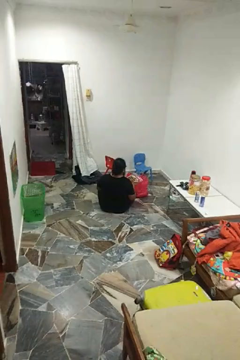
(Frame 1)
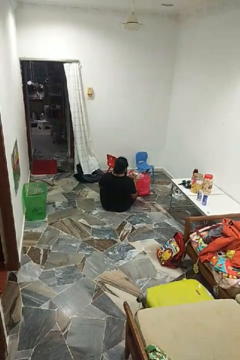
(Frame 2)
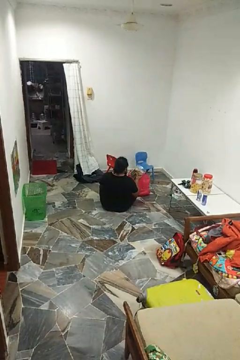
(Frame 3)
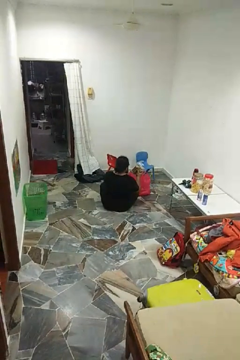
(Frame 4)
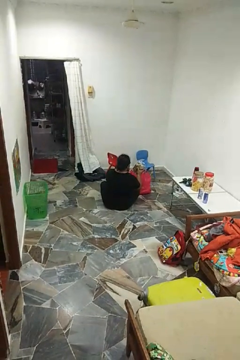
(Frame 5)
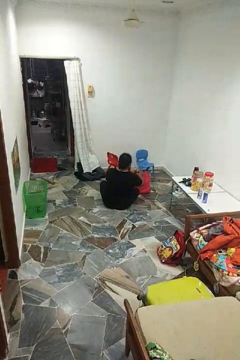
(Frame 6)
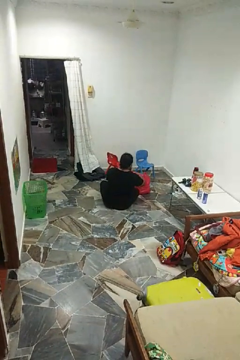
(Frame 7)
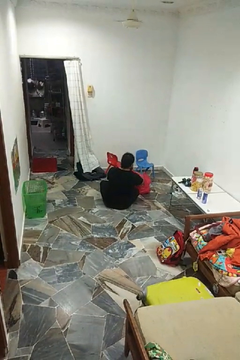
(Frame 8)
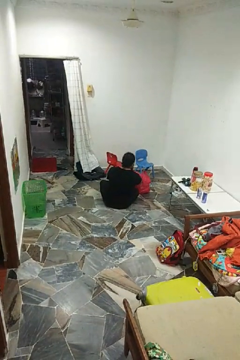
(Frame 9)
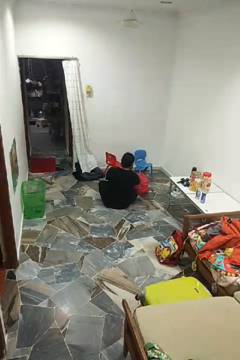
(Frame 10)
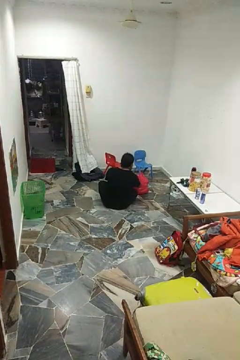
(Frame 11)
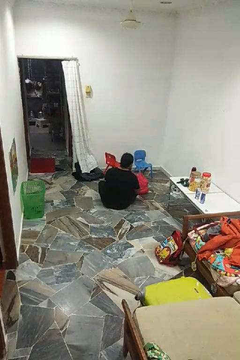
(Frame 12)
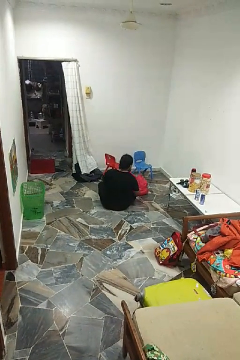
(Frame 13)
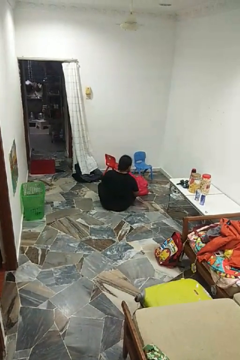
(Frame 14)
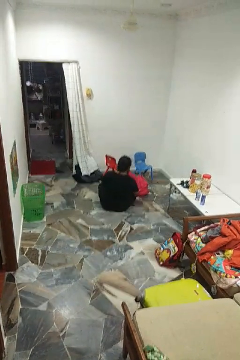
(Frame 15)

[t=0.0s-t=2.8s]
person puts object into bag

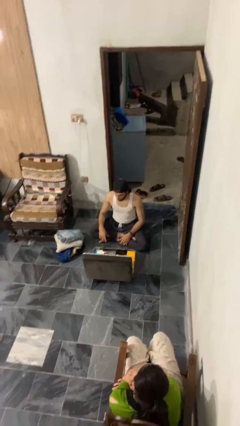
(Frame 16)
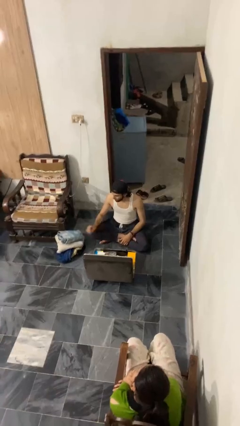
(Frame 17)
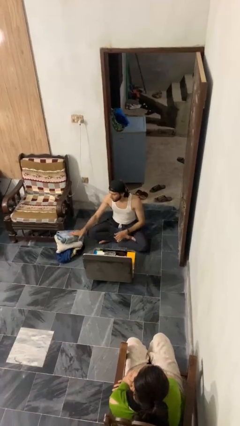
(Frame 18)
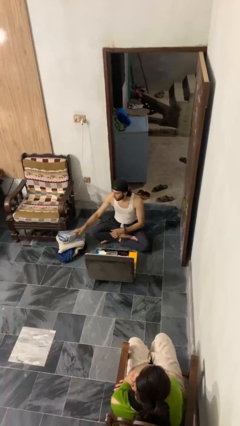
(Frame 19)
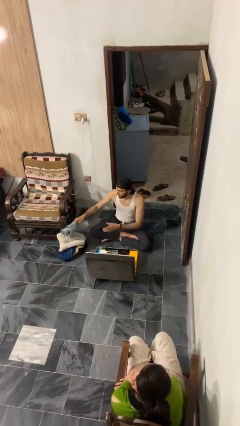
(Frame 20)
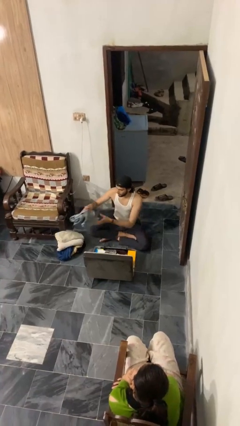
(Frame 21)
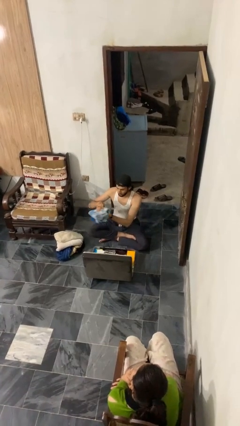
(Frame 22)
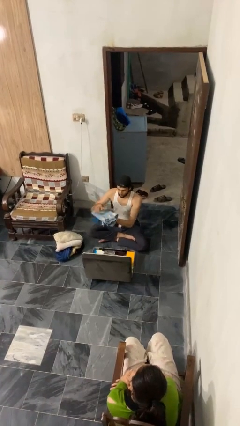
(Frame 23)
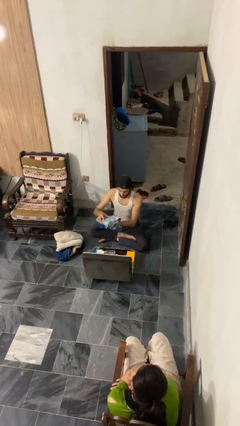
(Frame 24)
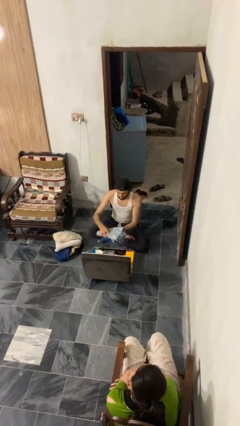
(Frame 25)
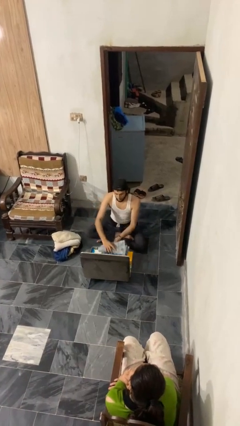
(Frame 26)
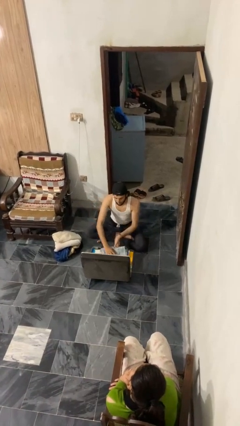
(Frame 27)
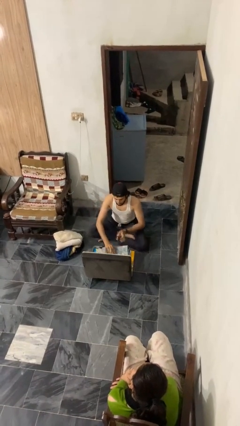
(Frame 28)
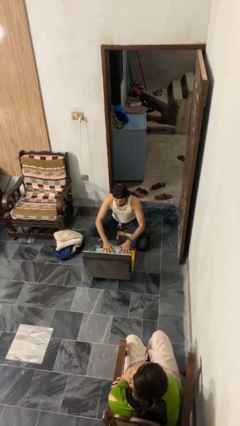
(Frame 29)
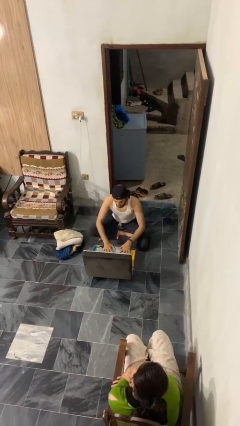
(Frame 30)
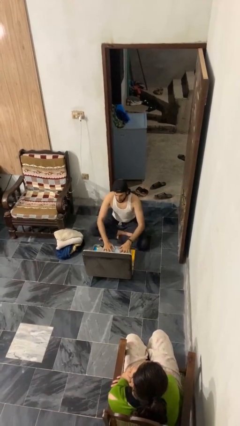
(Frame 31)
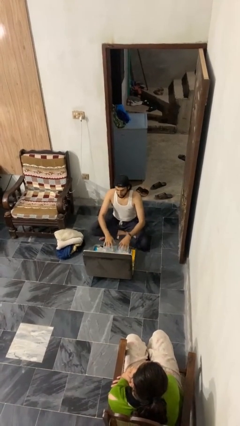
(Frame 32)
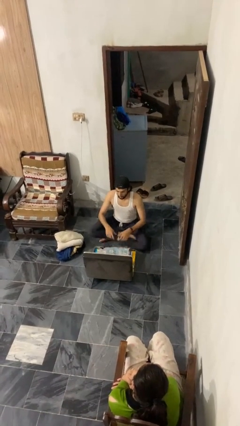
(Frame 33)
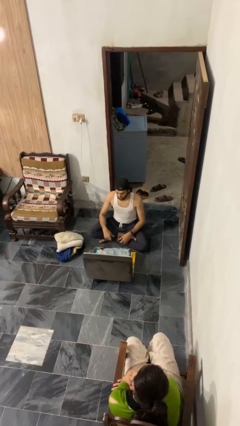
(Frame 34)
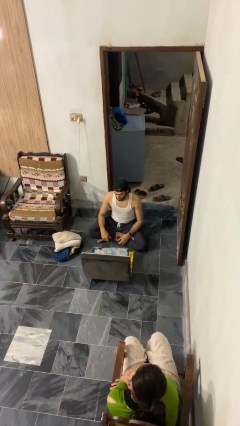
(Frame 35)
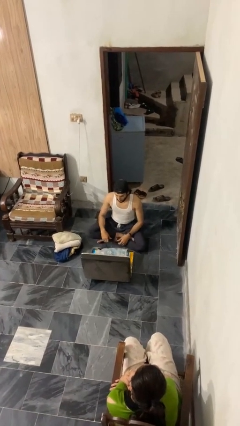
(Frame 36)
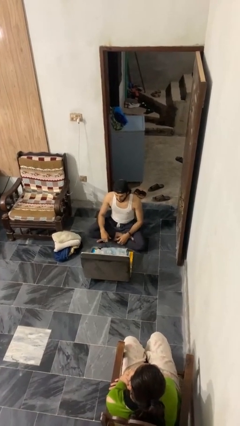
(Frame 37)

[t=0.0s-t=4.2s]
person loads clothes into suitcase

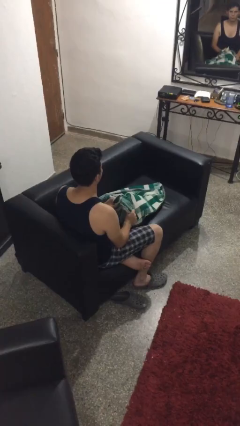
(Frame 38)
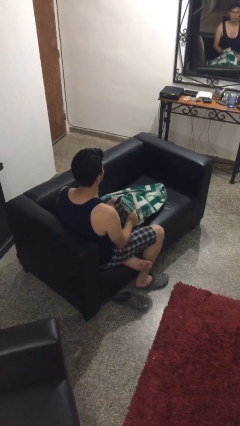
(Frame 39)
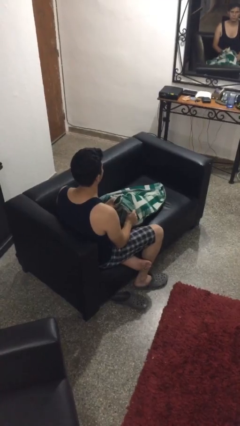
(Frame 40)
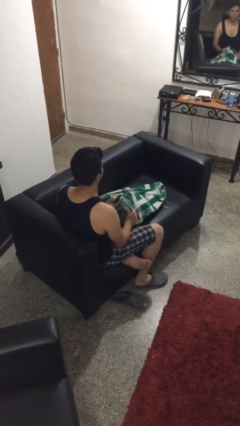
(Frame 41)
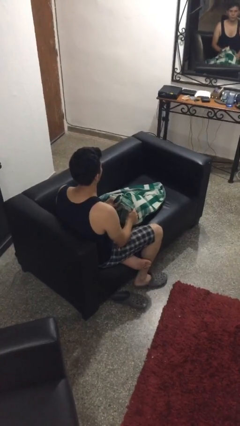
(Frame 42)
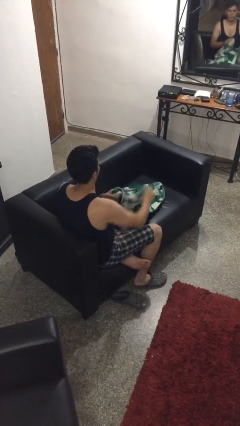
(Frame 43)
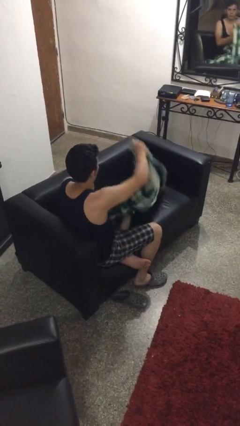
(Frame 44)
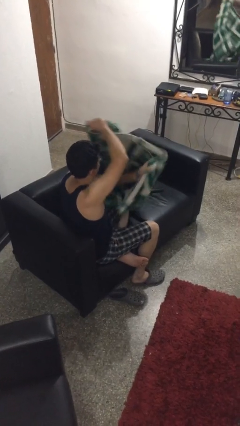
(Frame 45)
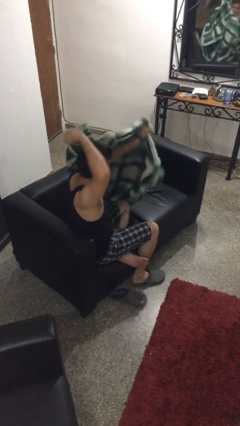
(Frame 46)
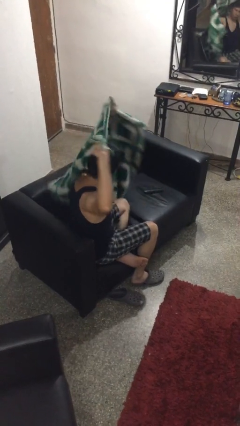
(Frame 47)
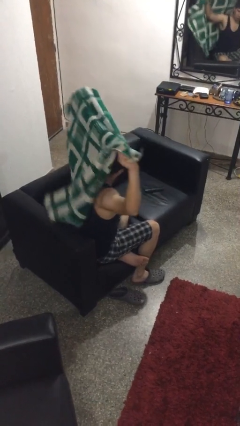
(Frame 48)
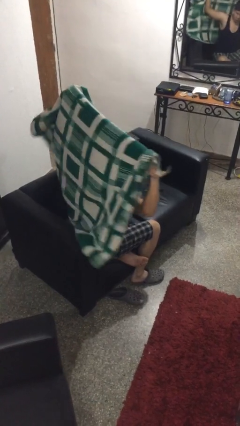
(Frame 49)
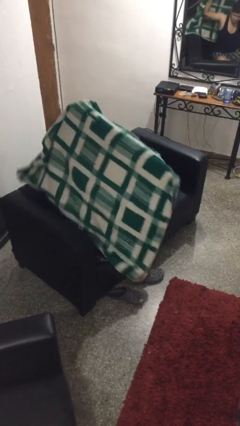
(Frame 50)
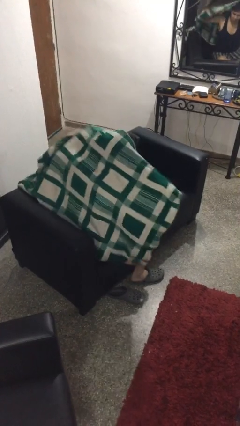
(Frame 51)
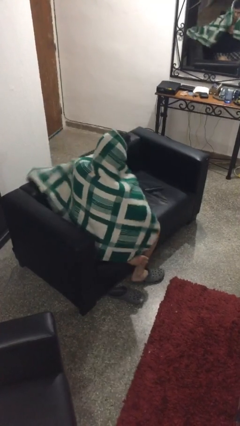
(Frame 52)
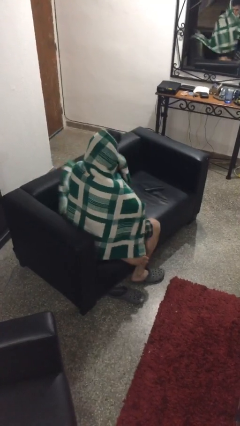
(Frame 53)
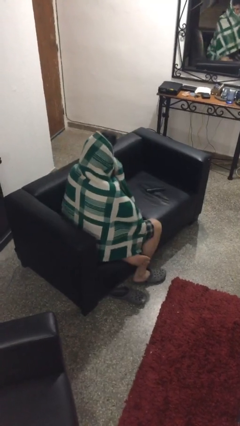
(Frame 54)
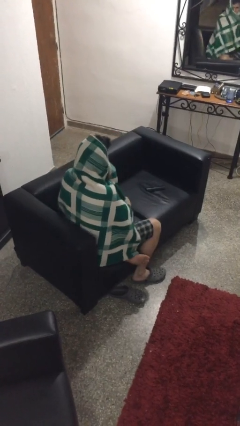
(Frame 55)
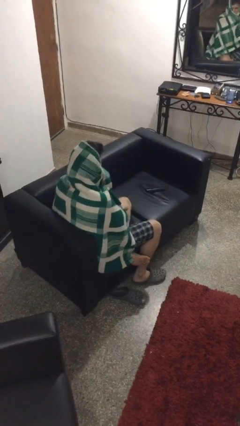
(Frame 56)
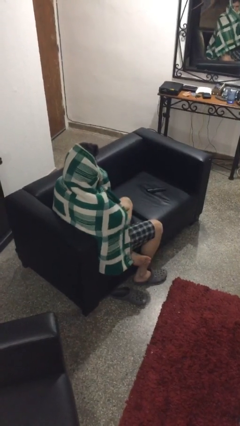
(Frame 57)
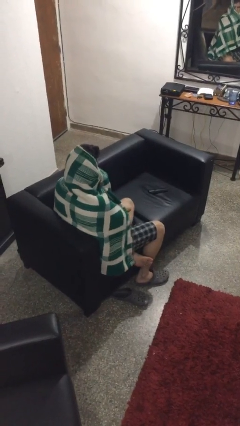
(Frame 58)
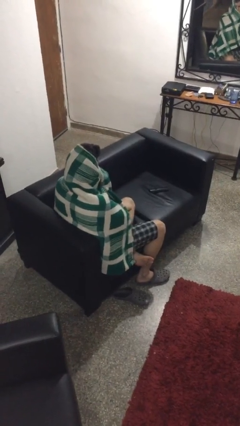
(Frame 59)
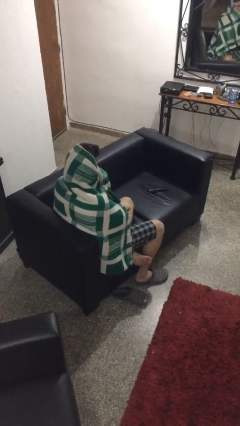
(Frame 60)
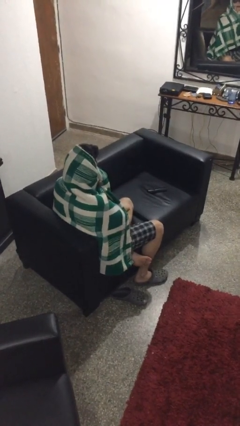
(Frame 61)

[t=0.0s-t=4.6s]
person covers with blanket

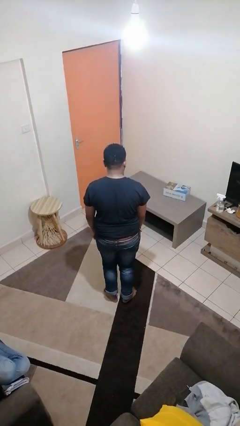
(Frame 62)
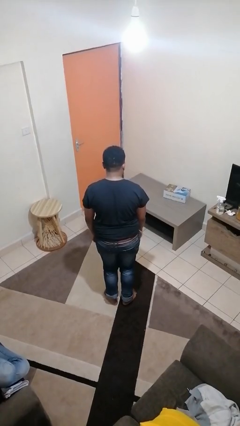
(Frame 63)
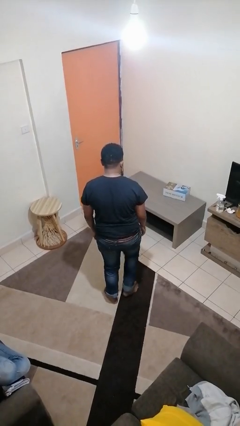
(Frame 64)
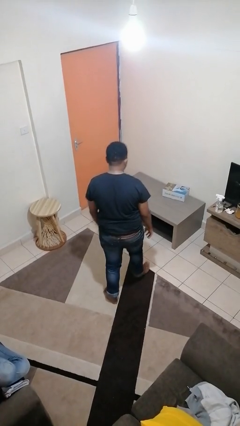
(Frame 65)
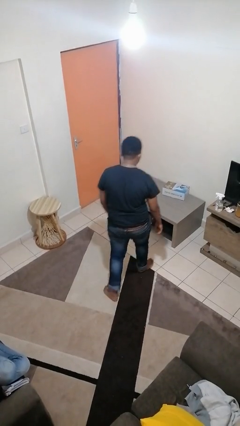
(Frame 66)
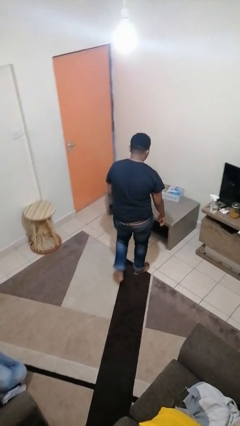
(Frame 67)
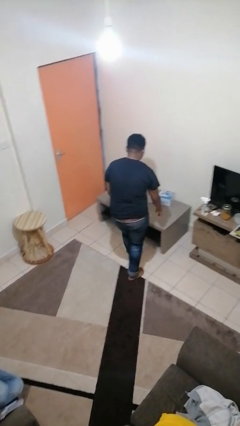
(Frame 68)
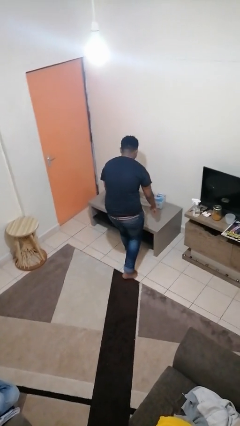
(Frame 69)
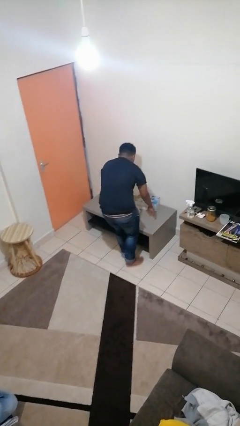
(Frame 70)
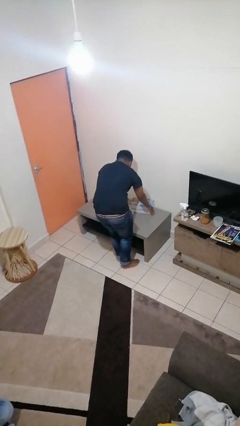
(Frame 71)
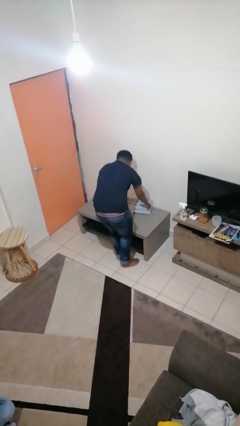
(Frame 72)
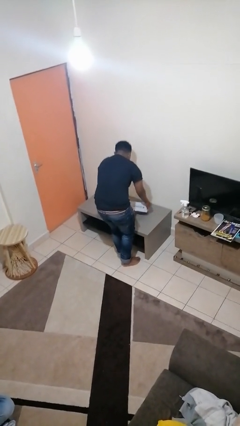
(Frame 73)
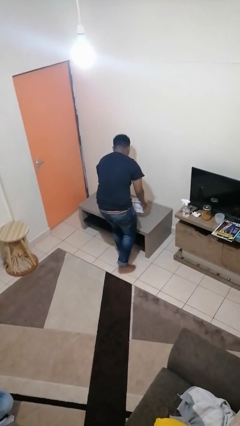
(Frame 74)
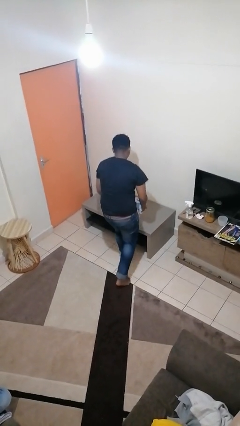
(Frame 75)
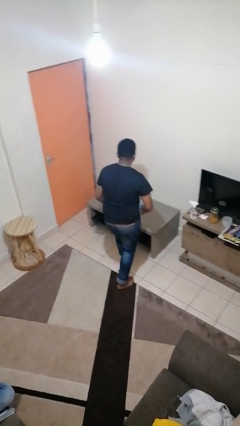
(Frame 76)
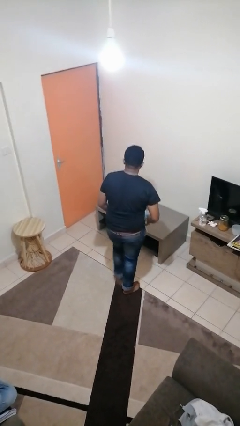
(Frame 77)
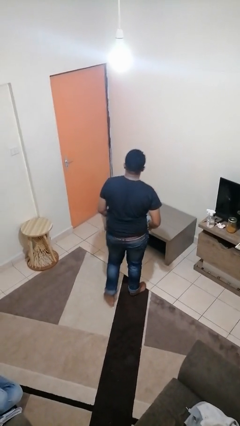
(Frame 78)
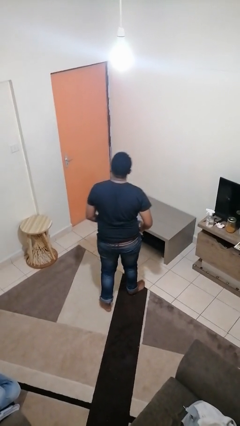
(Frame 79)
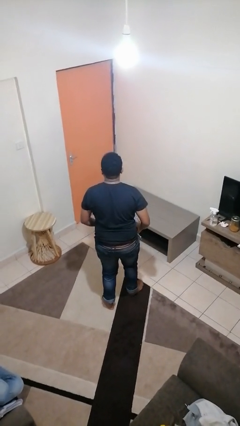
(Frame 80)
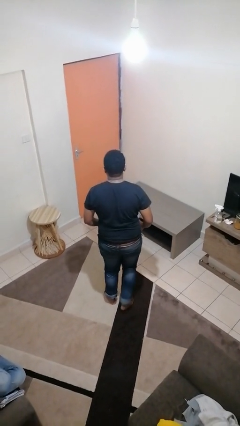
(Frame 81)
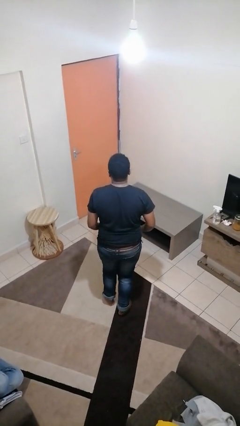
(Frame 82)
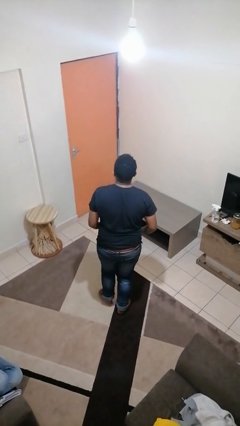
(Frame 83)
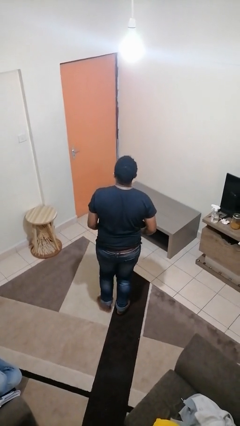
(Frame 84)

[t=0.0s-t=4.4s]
person picks up object from table

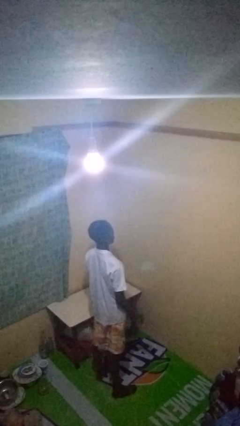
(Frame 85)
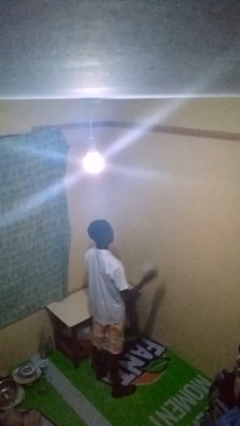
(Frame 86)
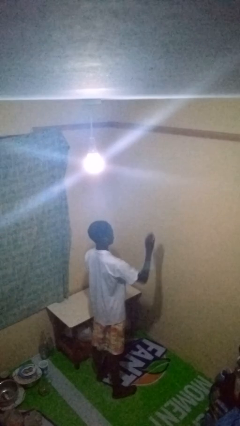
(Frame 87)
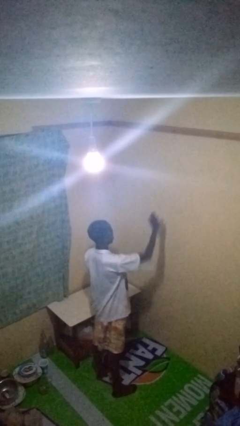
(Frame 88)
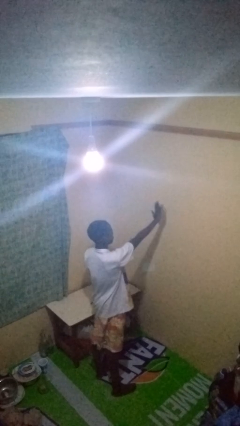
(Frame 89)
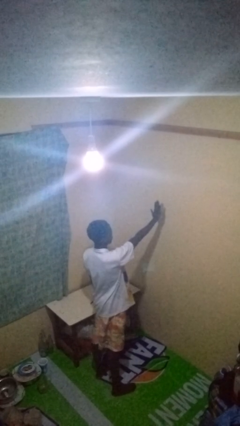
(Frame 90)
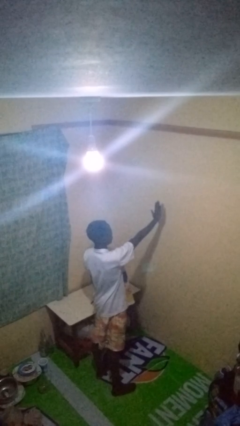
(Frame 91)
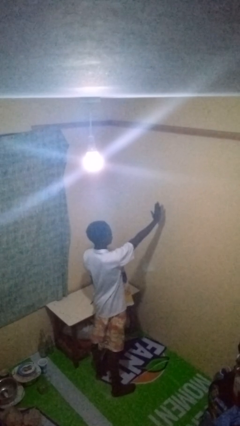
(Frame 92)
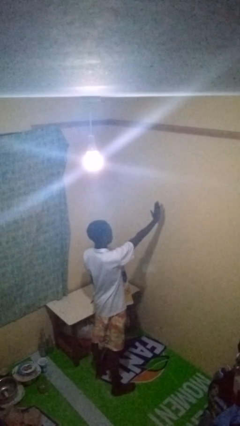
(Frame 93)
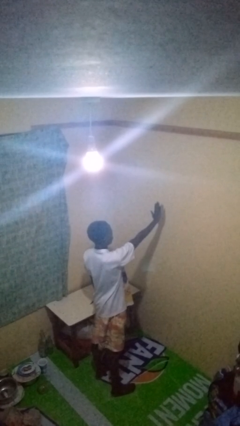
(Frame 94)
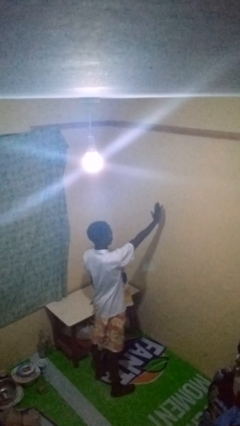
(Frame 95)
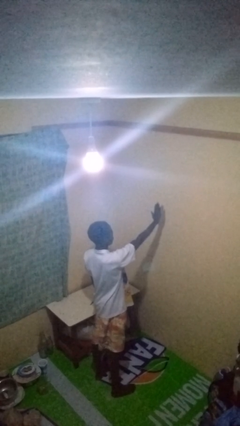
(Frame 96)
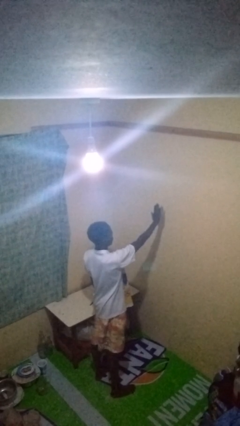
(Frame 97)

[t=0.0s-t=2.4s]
person gestures stop
